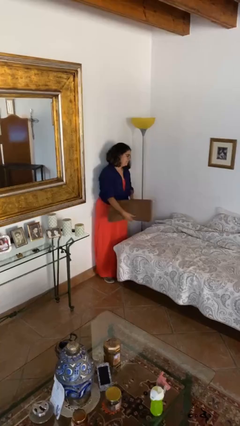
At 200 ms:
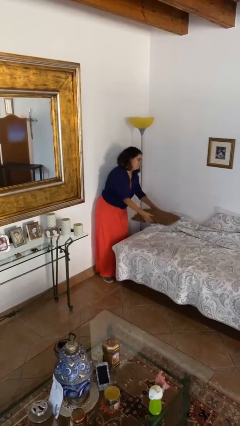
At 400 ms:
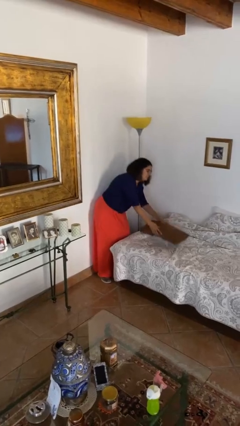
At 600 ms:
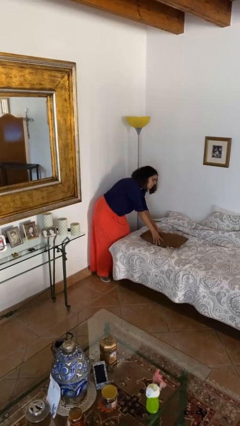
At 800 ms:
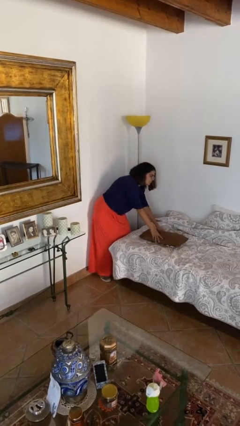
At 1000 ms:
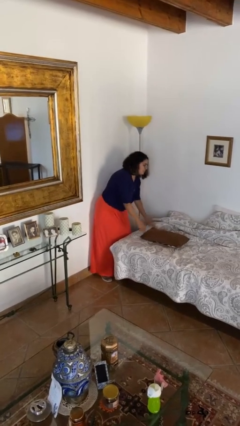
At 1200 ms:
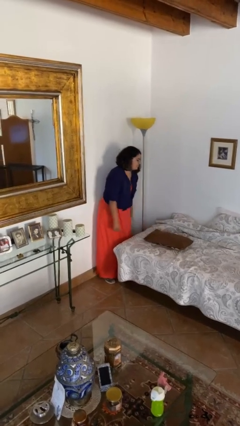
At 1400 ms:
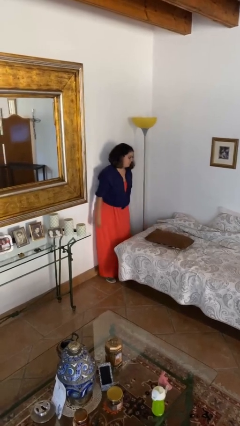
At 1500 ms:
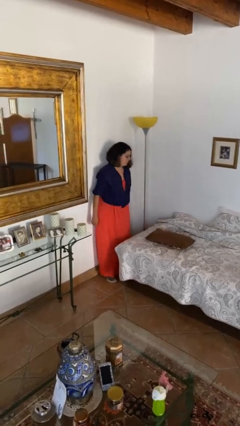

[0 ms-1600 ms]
person puts down object on bed

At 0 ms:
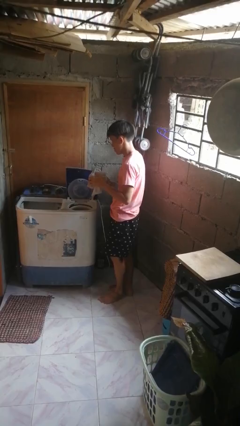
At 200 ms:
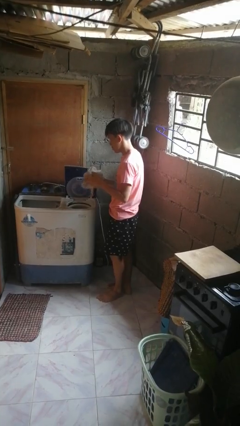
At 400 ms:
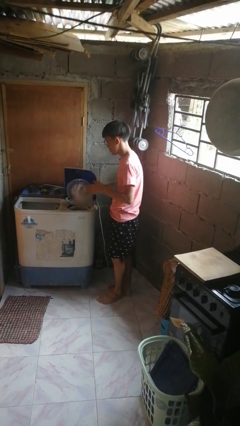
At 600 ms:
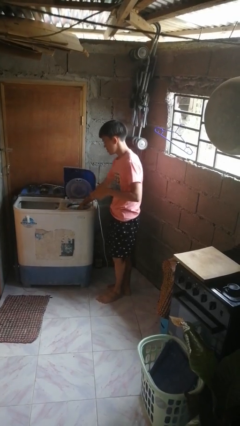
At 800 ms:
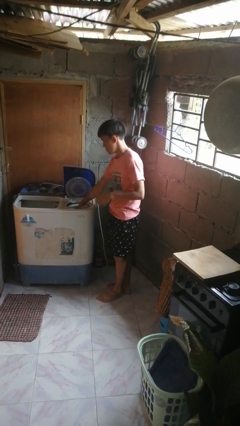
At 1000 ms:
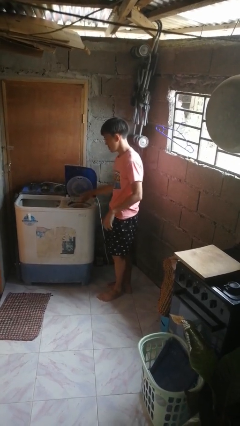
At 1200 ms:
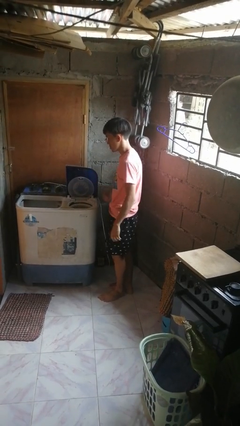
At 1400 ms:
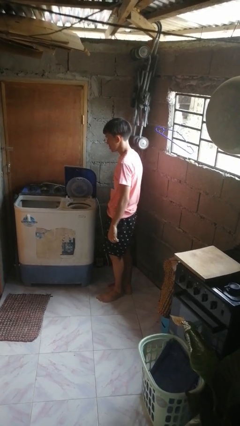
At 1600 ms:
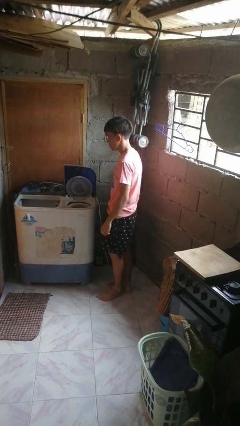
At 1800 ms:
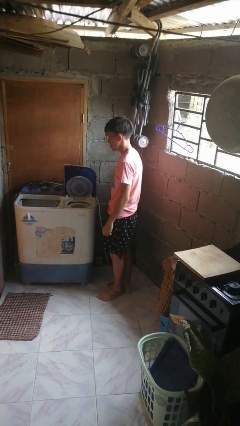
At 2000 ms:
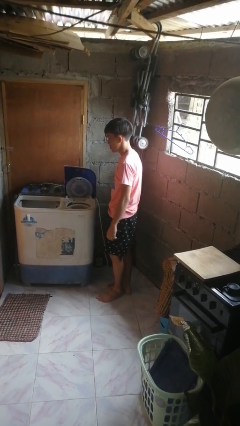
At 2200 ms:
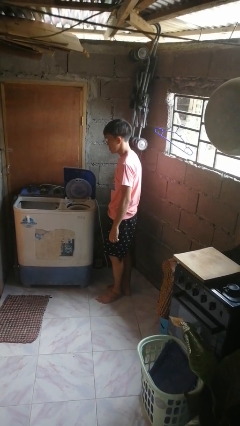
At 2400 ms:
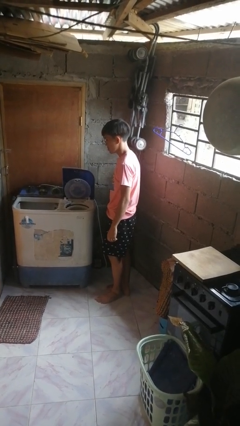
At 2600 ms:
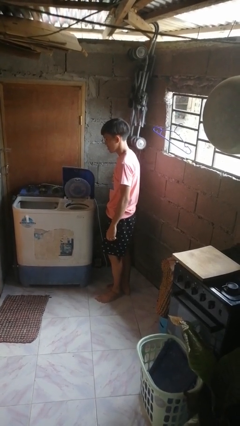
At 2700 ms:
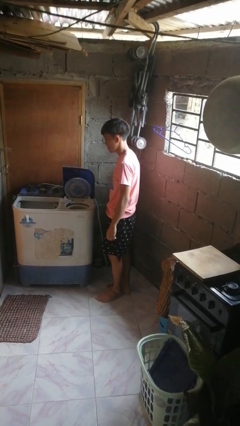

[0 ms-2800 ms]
person loads dryer

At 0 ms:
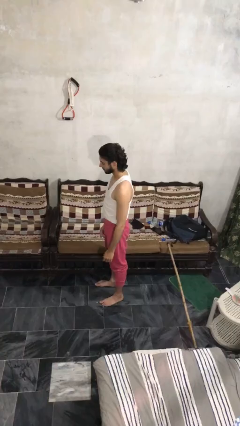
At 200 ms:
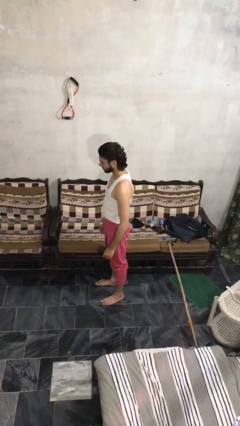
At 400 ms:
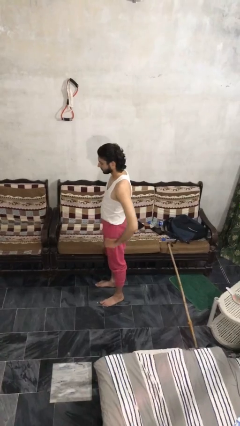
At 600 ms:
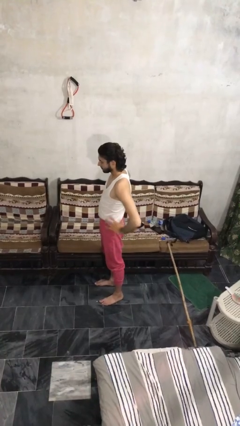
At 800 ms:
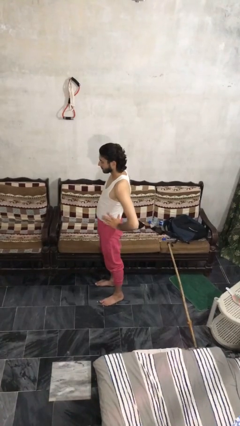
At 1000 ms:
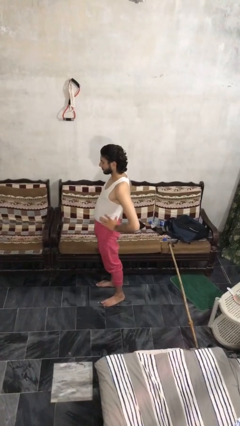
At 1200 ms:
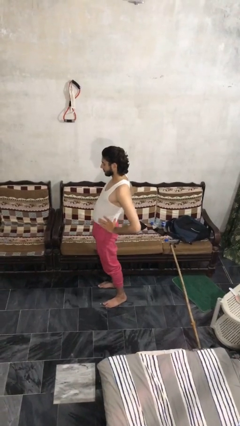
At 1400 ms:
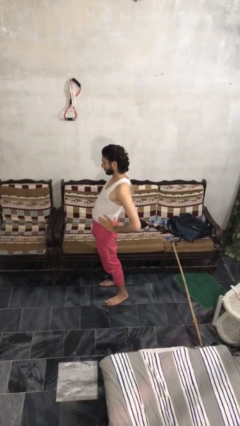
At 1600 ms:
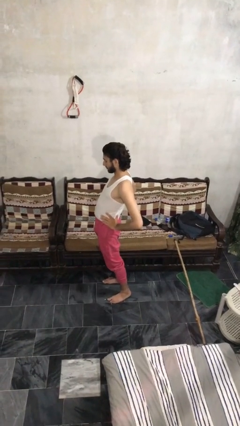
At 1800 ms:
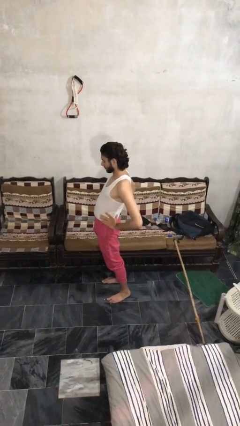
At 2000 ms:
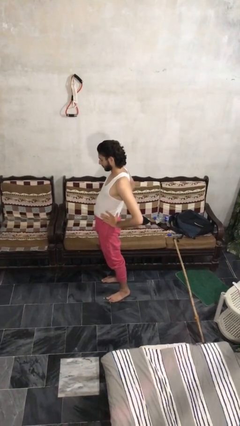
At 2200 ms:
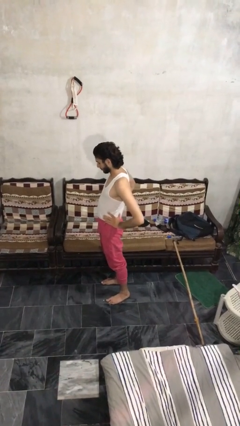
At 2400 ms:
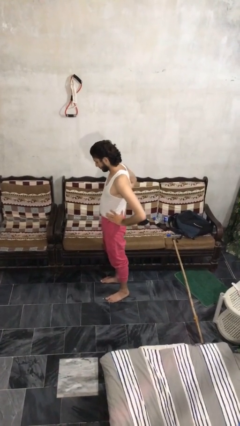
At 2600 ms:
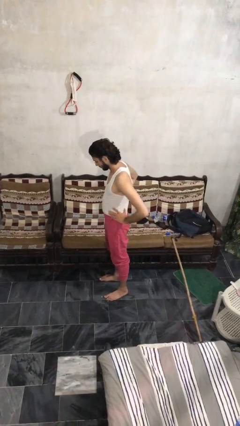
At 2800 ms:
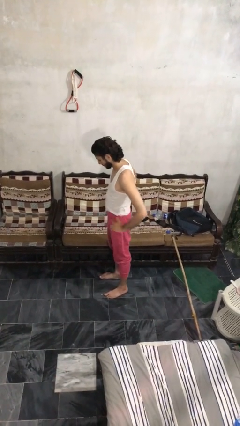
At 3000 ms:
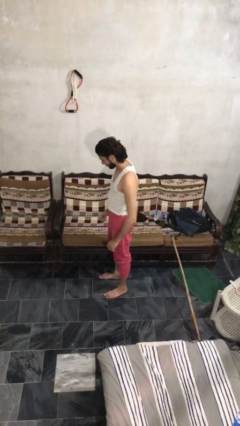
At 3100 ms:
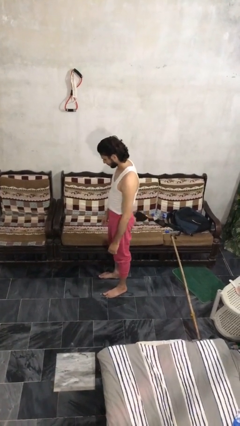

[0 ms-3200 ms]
person stretches back

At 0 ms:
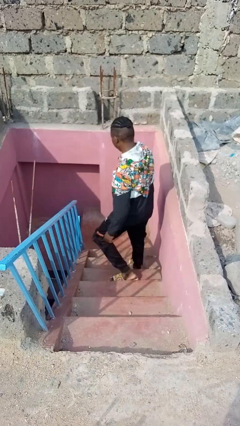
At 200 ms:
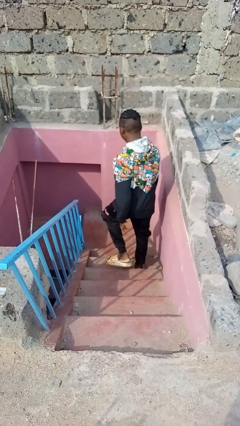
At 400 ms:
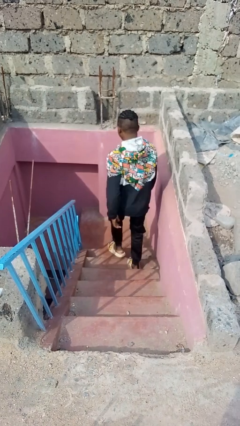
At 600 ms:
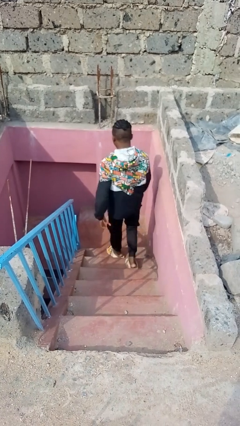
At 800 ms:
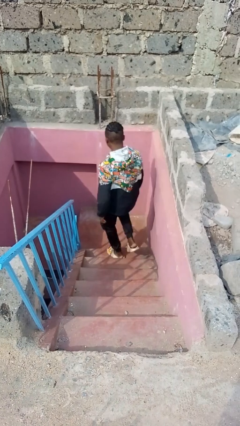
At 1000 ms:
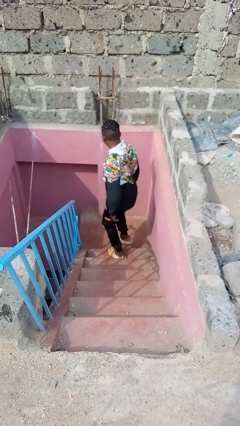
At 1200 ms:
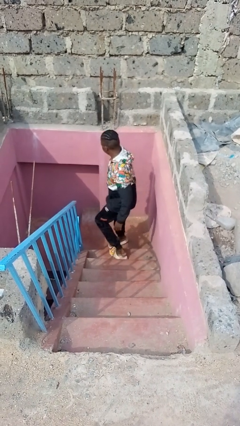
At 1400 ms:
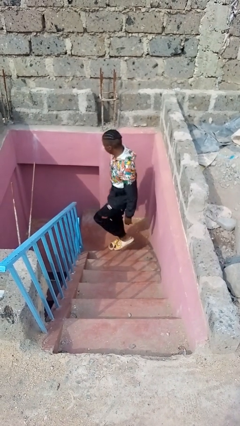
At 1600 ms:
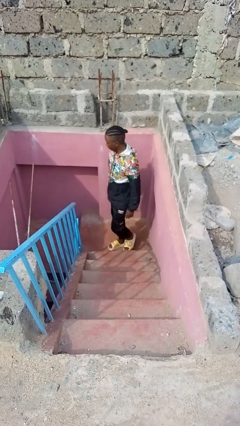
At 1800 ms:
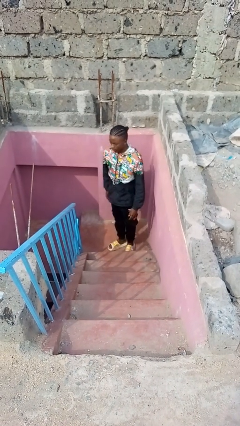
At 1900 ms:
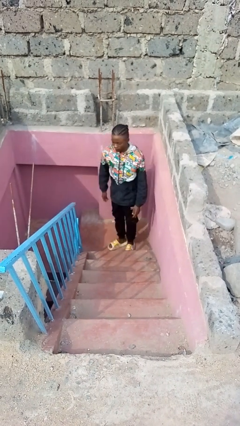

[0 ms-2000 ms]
person climbs down stairs

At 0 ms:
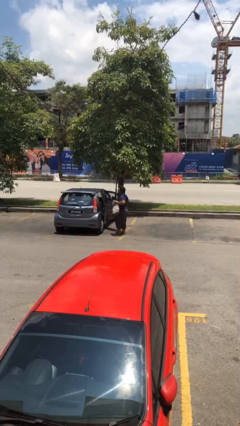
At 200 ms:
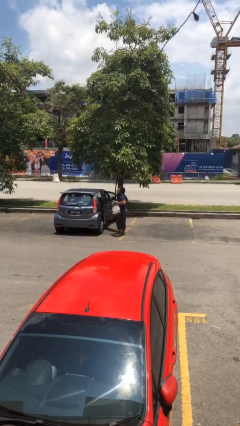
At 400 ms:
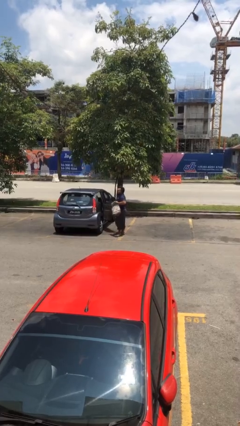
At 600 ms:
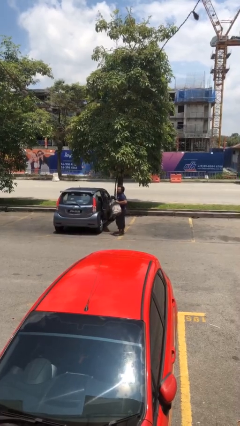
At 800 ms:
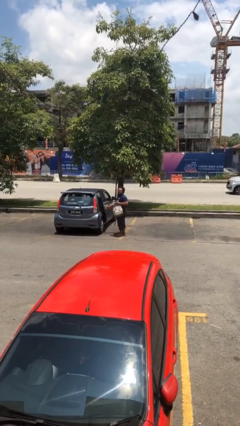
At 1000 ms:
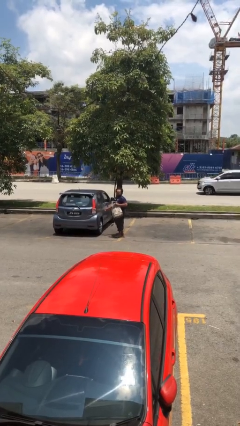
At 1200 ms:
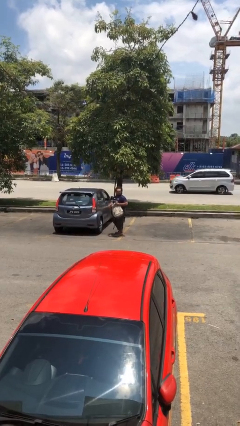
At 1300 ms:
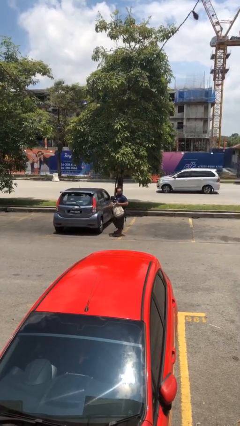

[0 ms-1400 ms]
person closes car door

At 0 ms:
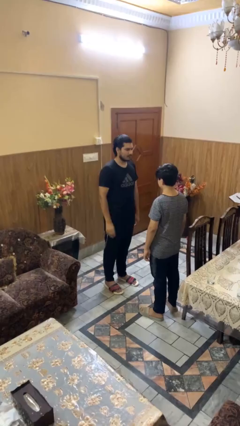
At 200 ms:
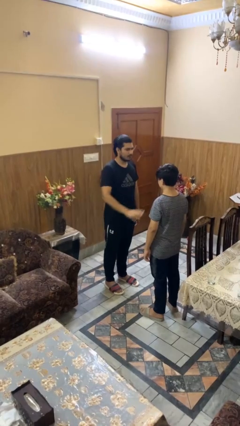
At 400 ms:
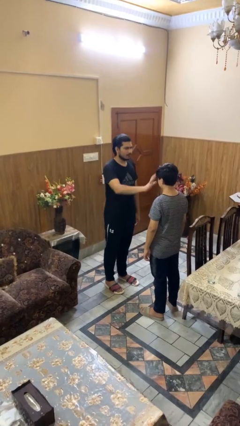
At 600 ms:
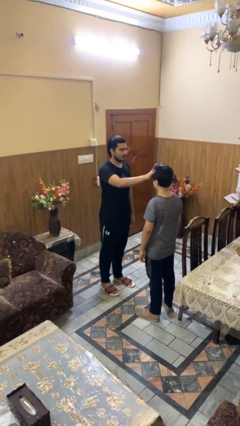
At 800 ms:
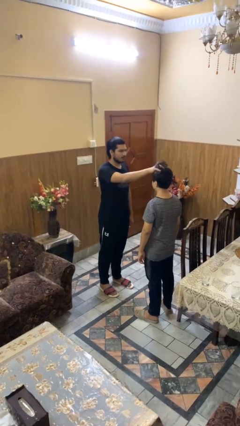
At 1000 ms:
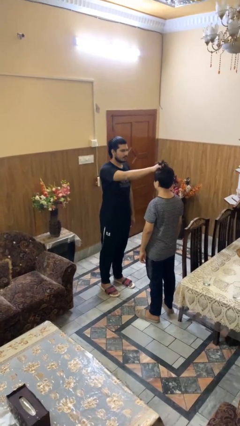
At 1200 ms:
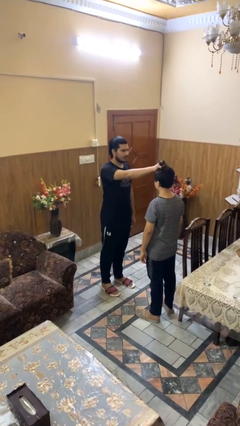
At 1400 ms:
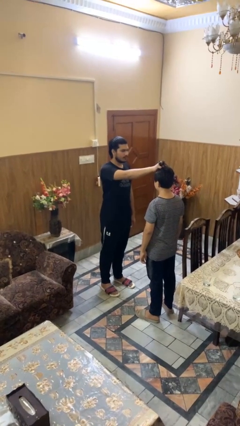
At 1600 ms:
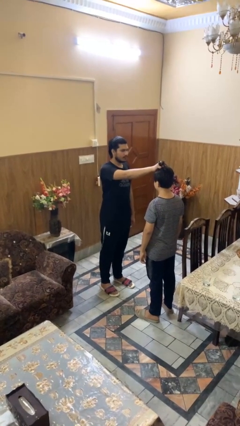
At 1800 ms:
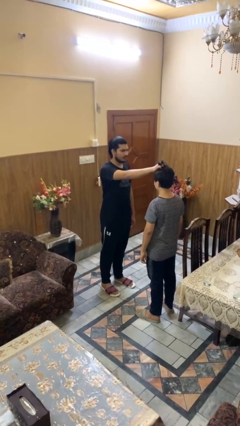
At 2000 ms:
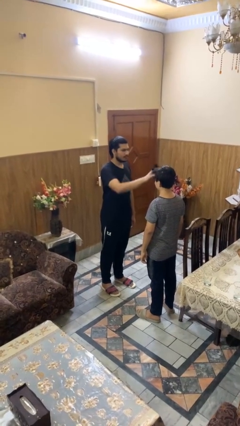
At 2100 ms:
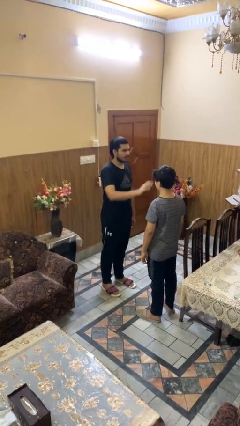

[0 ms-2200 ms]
person grabs person by hair

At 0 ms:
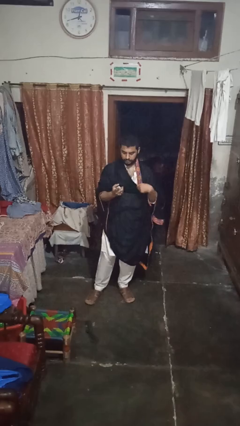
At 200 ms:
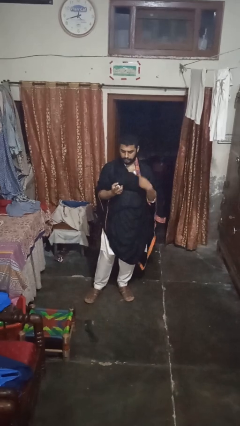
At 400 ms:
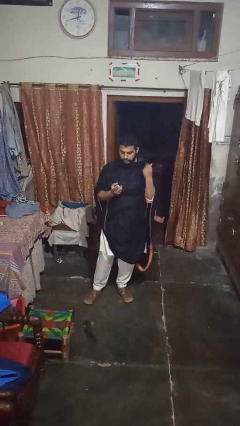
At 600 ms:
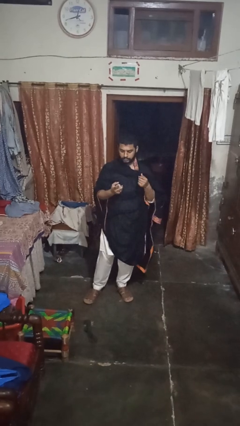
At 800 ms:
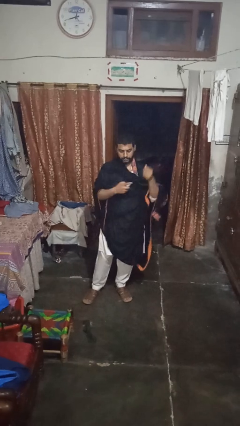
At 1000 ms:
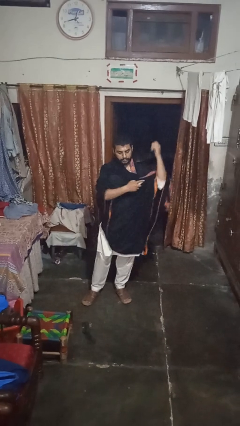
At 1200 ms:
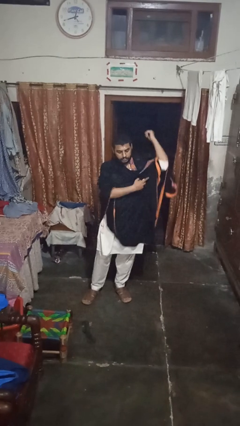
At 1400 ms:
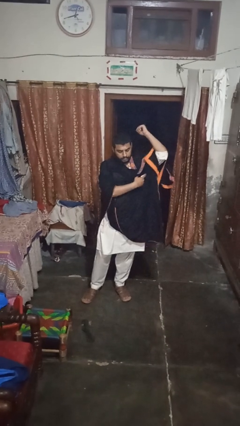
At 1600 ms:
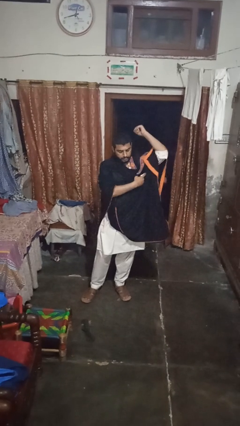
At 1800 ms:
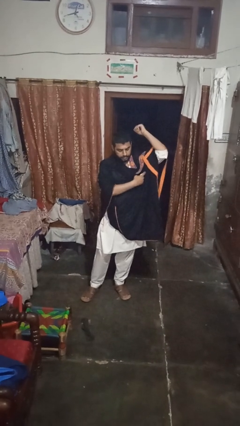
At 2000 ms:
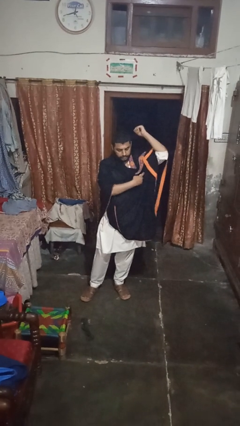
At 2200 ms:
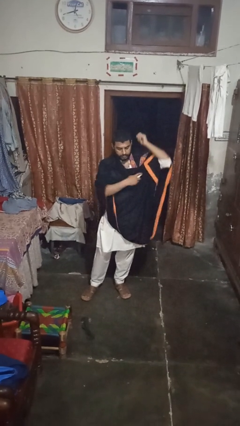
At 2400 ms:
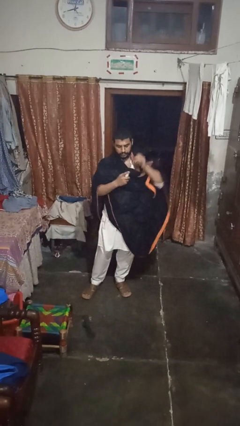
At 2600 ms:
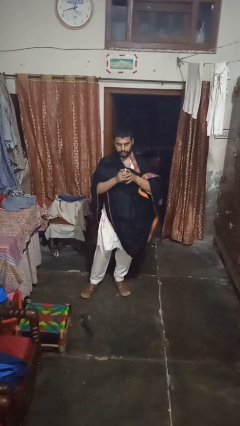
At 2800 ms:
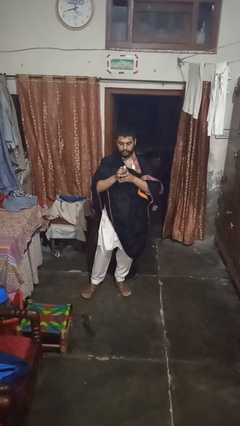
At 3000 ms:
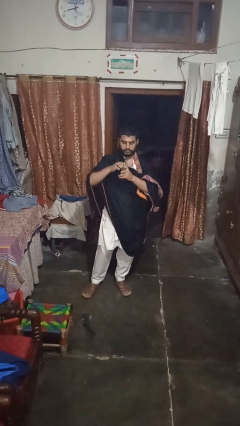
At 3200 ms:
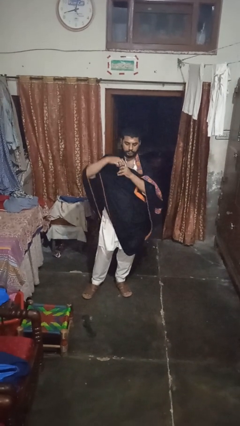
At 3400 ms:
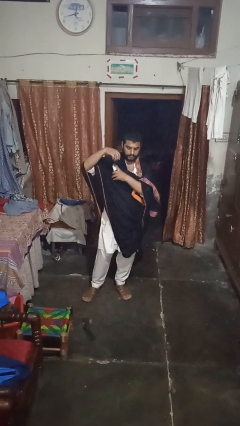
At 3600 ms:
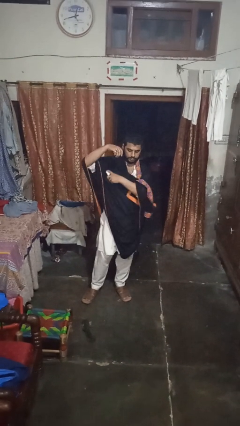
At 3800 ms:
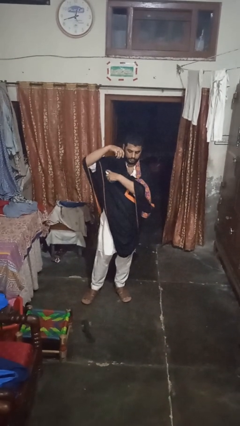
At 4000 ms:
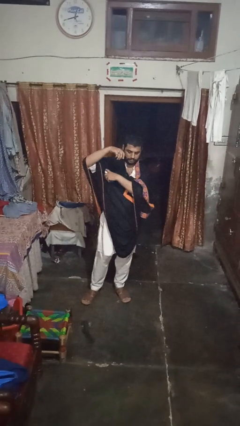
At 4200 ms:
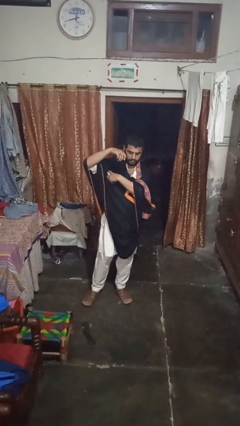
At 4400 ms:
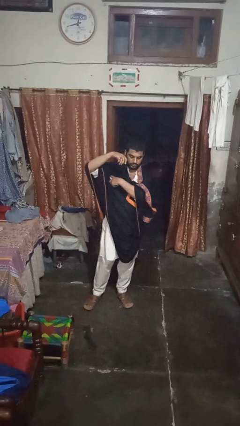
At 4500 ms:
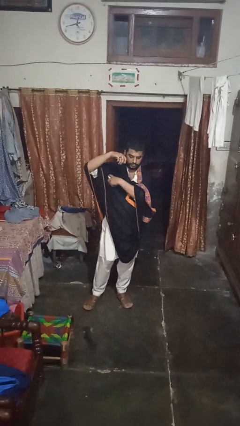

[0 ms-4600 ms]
person applies deodorant
